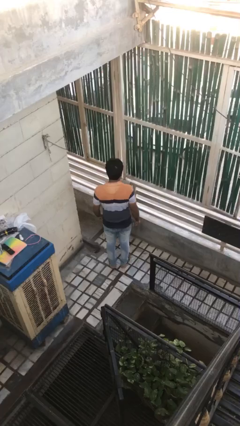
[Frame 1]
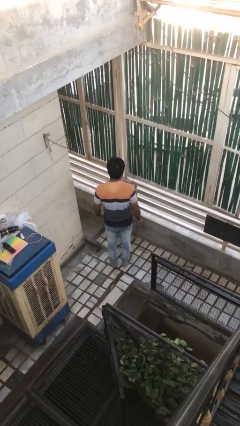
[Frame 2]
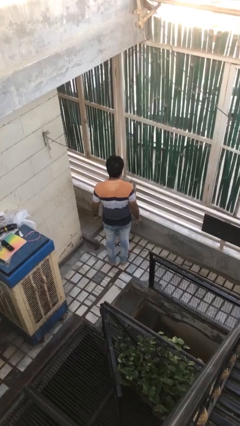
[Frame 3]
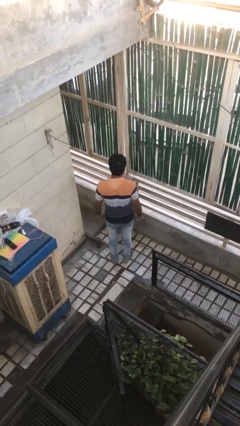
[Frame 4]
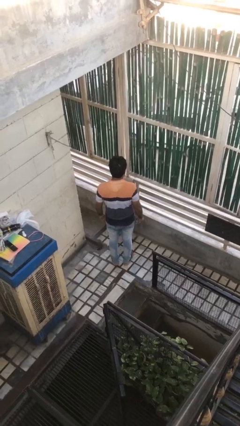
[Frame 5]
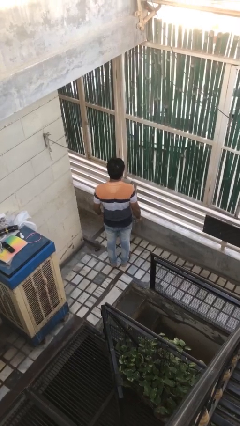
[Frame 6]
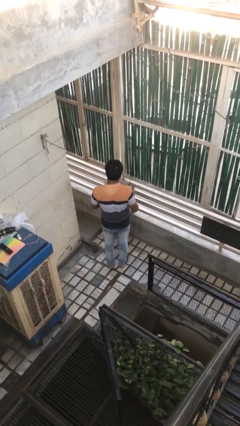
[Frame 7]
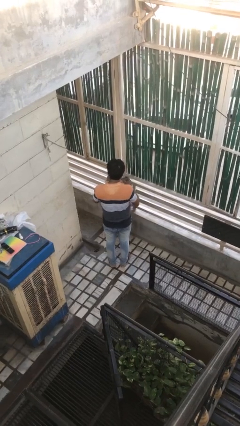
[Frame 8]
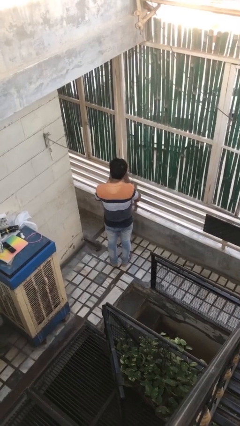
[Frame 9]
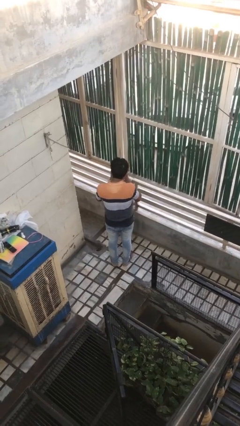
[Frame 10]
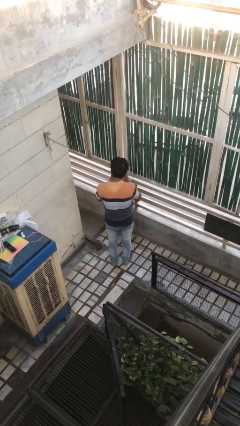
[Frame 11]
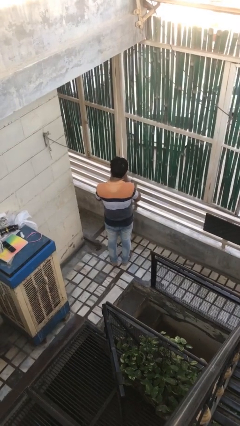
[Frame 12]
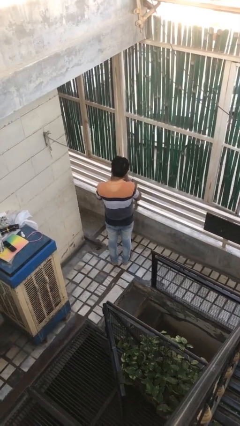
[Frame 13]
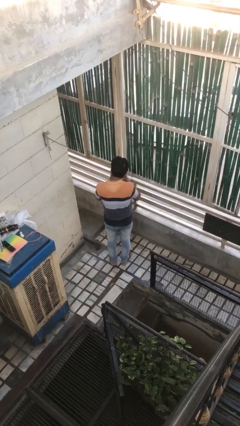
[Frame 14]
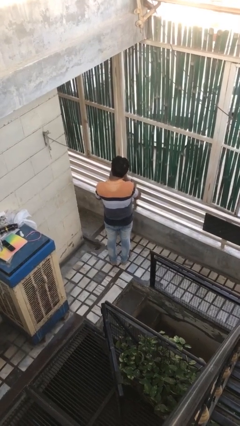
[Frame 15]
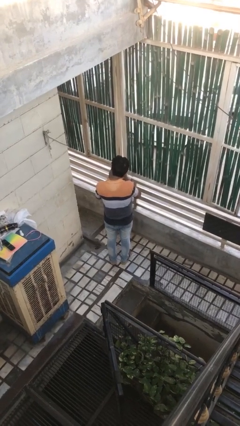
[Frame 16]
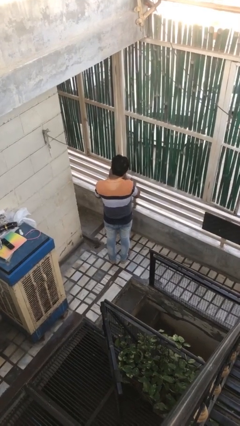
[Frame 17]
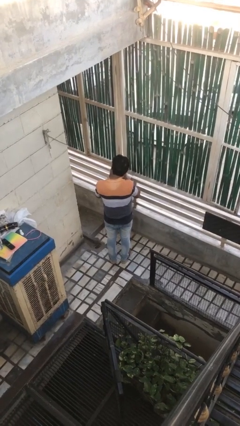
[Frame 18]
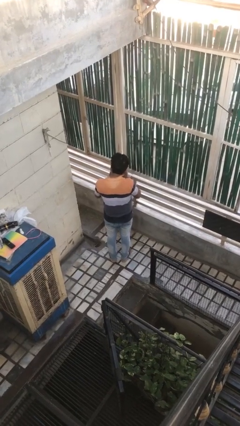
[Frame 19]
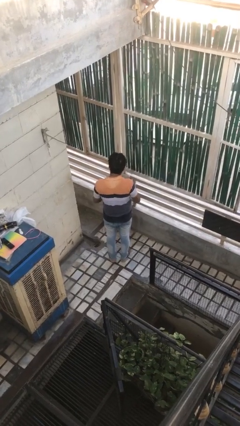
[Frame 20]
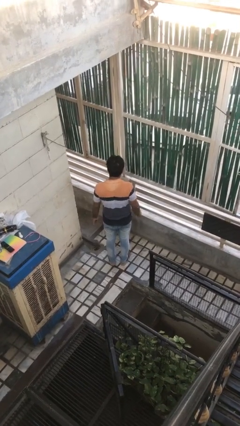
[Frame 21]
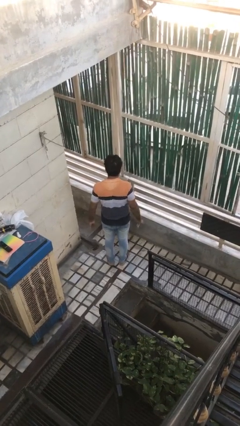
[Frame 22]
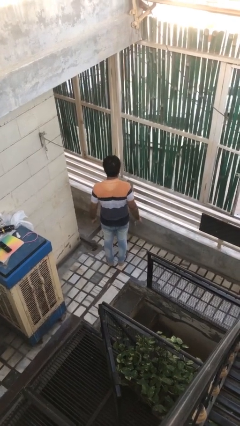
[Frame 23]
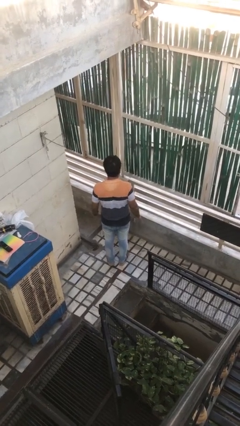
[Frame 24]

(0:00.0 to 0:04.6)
person clips fingernails

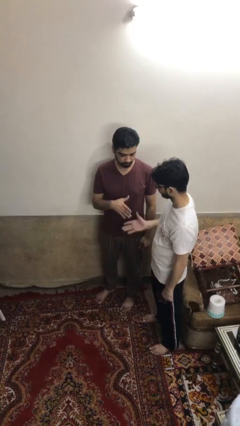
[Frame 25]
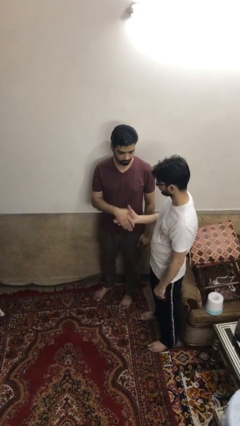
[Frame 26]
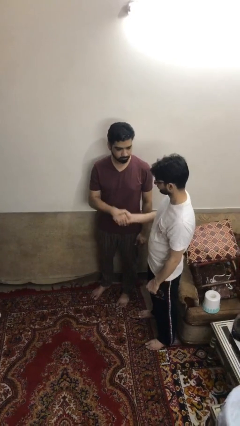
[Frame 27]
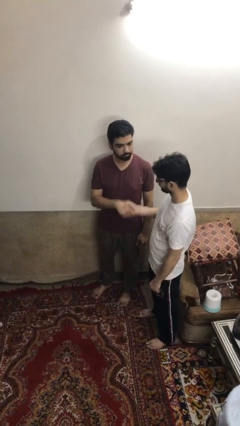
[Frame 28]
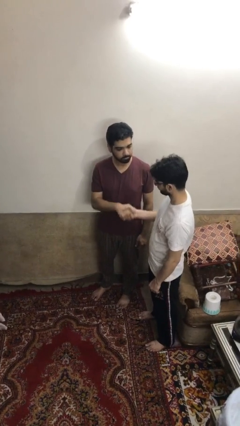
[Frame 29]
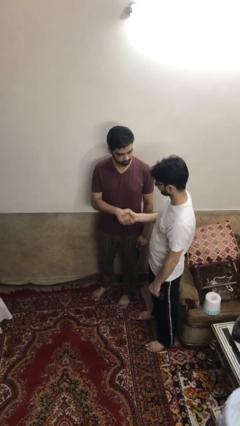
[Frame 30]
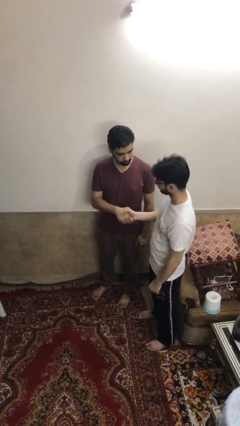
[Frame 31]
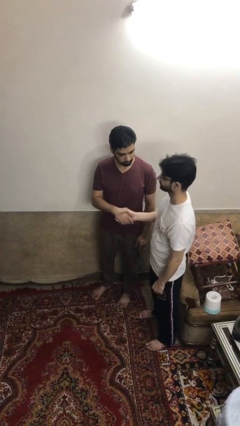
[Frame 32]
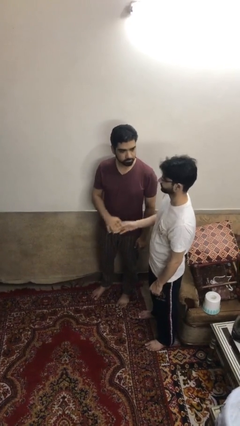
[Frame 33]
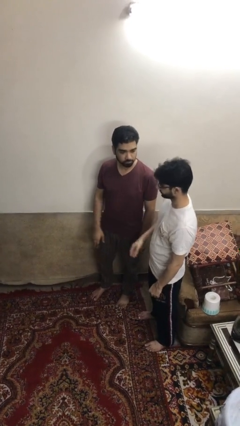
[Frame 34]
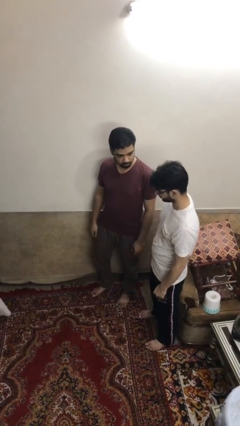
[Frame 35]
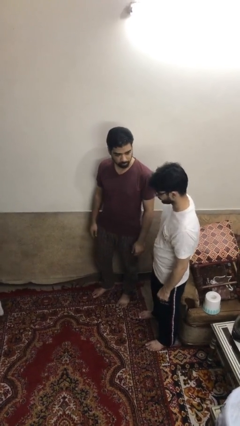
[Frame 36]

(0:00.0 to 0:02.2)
person shakes hand

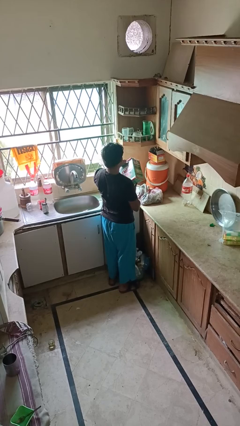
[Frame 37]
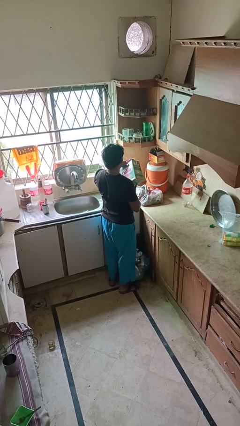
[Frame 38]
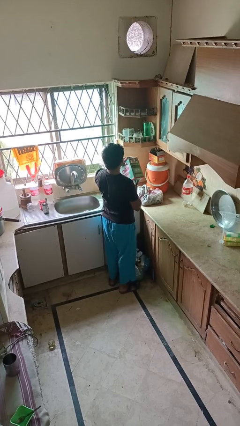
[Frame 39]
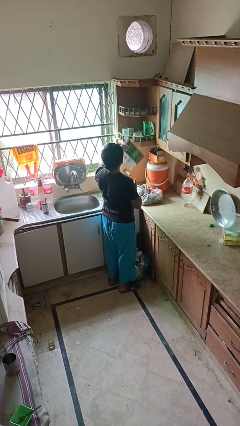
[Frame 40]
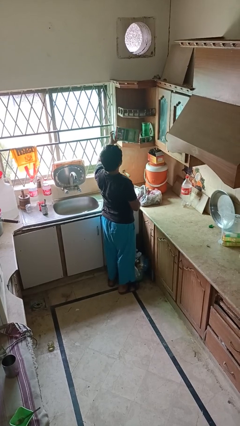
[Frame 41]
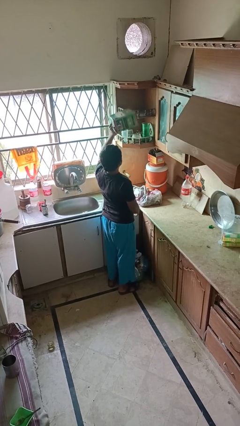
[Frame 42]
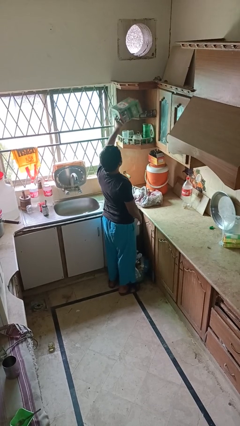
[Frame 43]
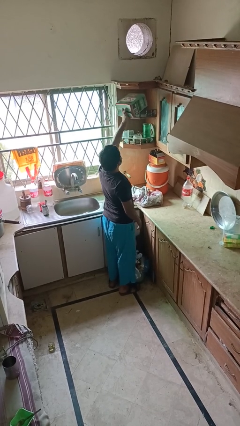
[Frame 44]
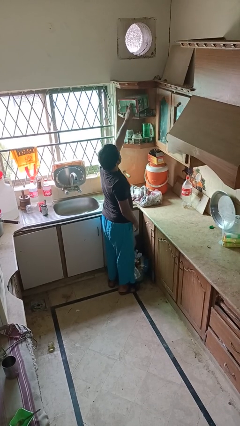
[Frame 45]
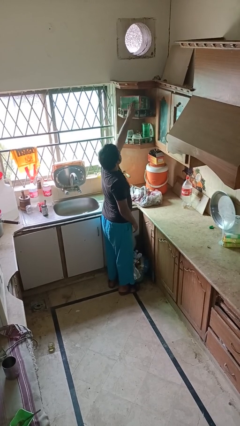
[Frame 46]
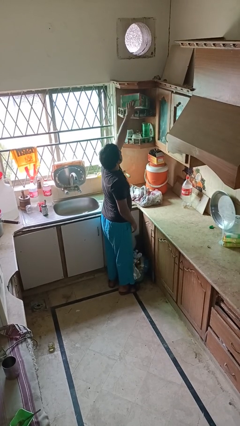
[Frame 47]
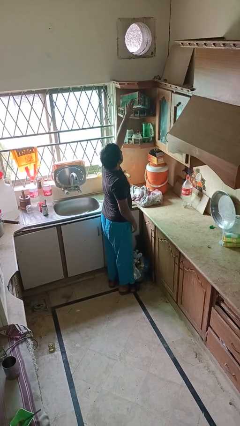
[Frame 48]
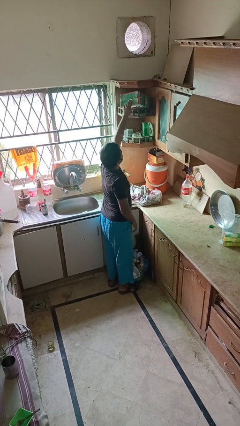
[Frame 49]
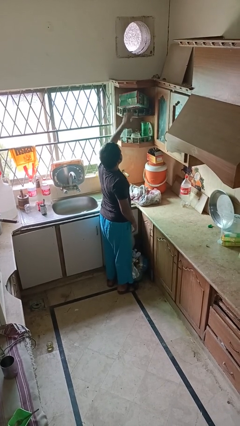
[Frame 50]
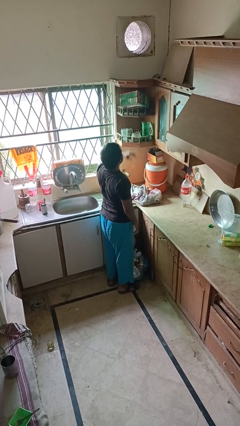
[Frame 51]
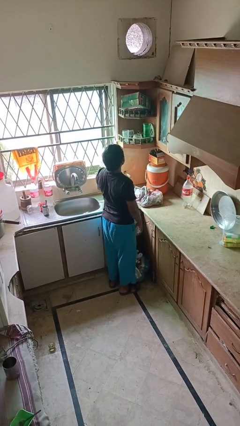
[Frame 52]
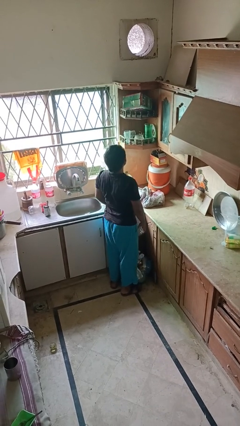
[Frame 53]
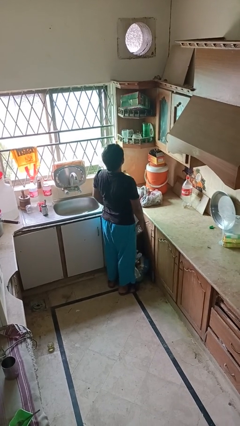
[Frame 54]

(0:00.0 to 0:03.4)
person puts down object on shelf

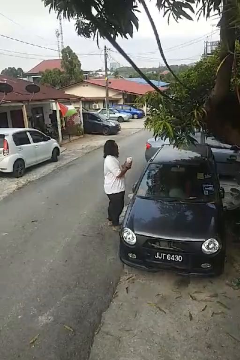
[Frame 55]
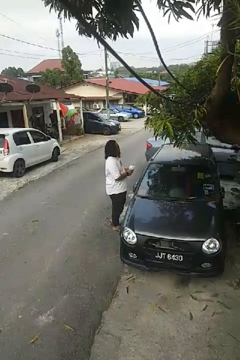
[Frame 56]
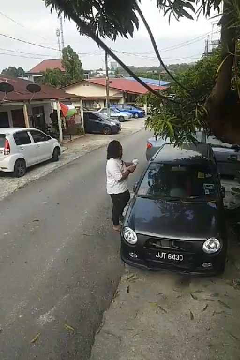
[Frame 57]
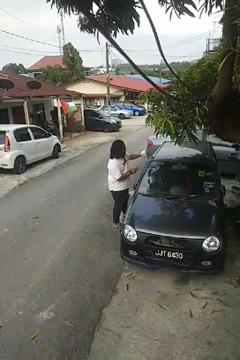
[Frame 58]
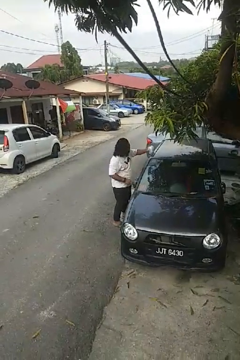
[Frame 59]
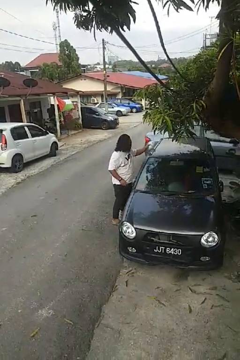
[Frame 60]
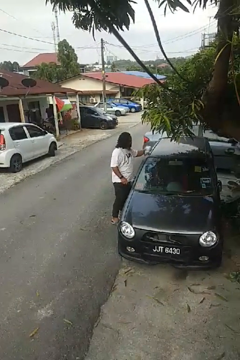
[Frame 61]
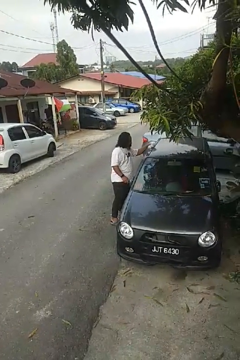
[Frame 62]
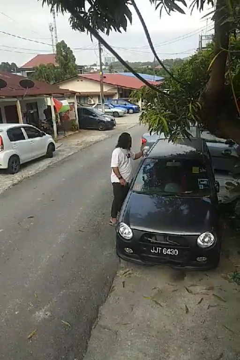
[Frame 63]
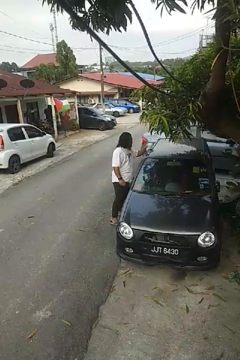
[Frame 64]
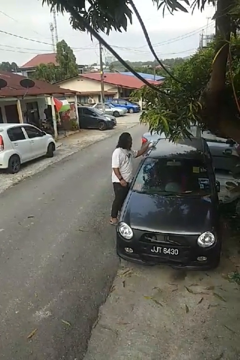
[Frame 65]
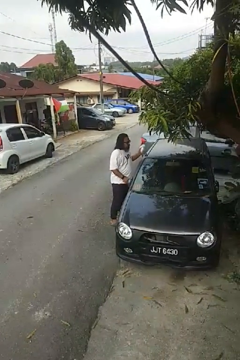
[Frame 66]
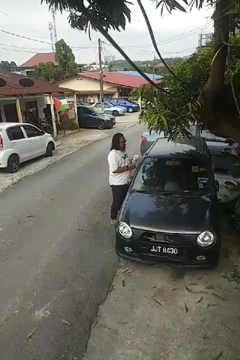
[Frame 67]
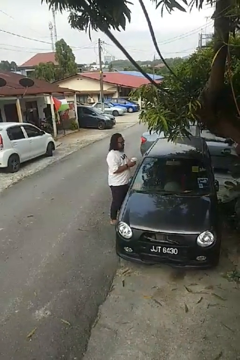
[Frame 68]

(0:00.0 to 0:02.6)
person polishes car with rag

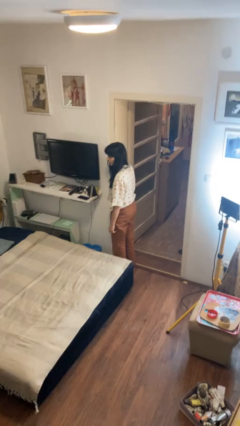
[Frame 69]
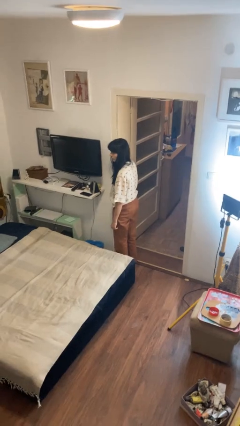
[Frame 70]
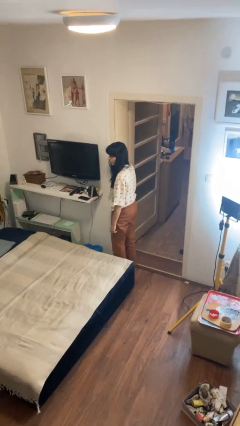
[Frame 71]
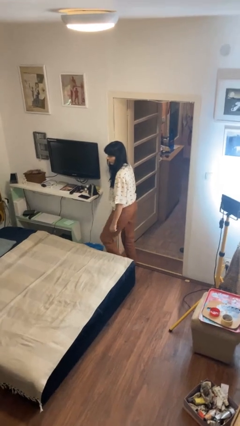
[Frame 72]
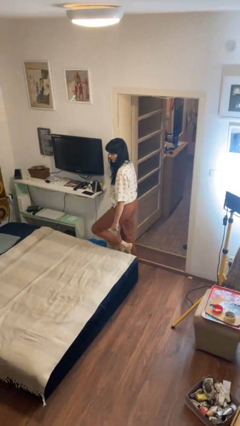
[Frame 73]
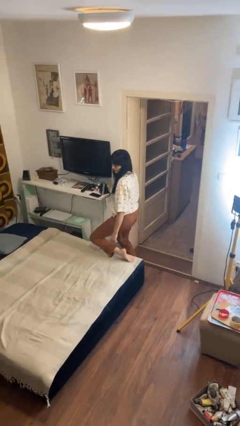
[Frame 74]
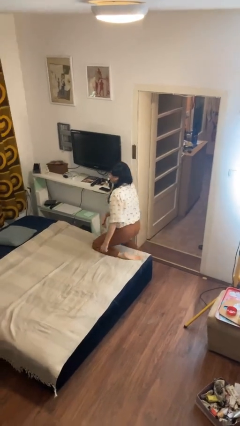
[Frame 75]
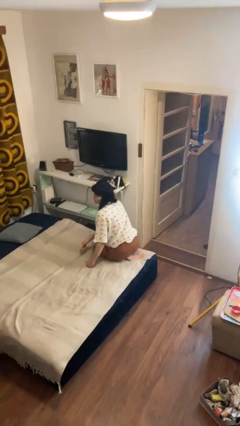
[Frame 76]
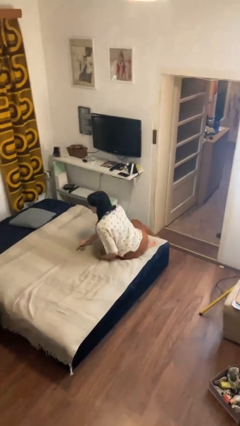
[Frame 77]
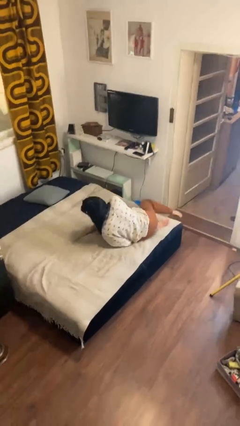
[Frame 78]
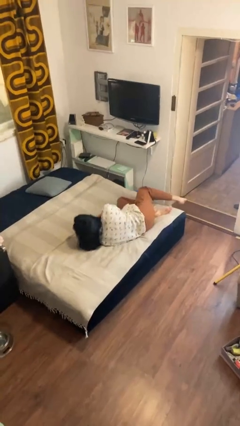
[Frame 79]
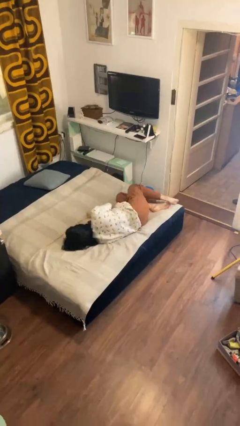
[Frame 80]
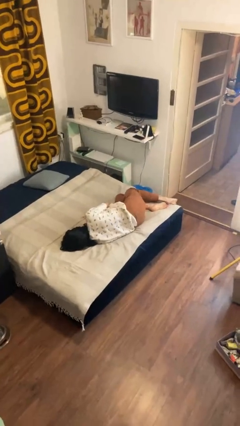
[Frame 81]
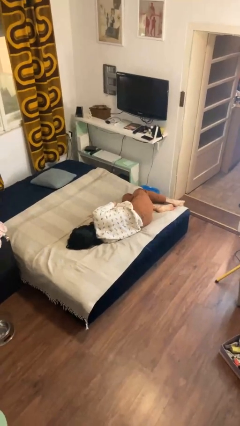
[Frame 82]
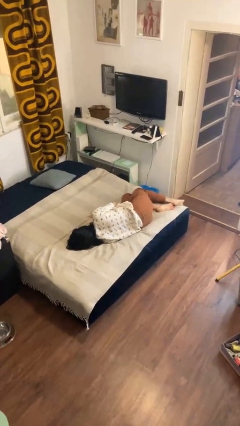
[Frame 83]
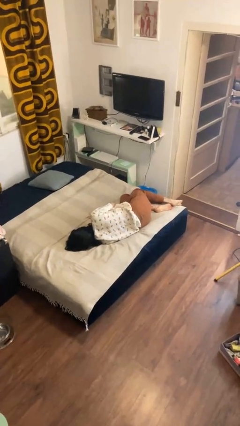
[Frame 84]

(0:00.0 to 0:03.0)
person lies down on bed

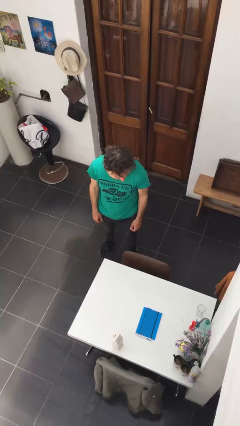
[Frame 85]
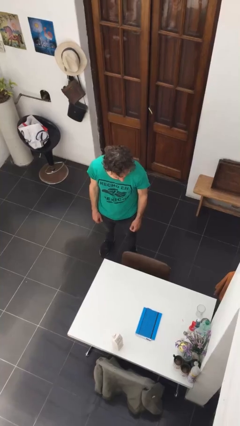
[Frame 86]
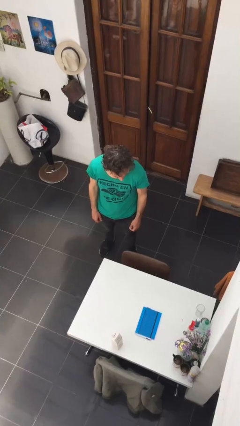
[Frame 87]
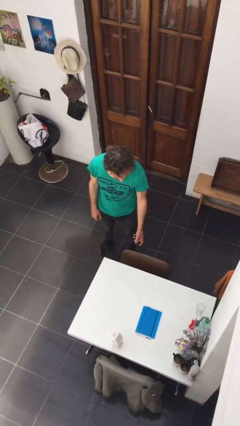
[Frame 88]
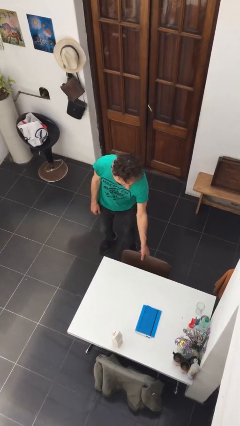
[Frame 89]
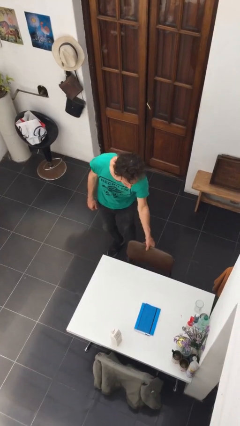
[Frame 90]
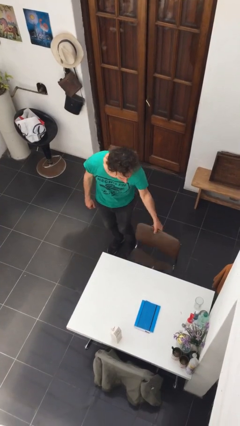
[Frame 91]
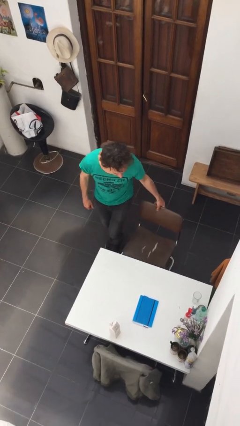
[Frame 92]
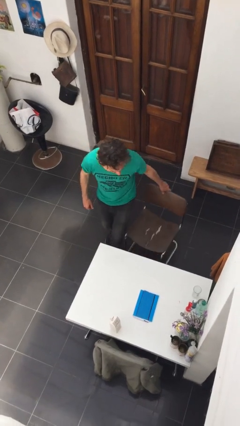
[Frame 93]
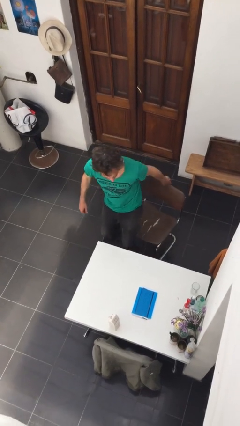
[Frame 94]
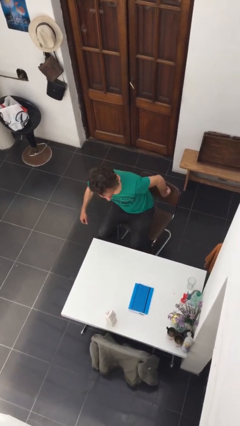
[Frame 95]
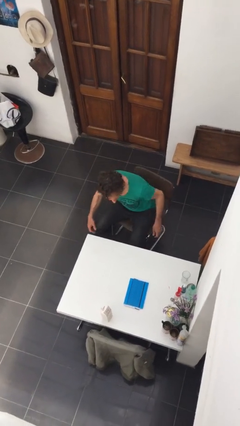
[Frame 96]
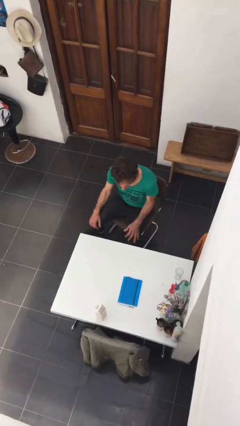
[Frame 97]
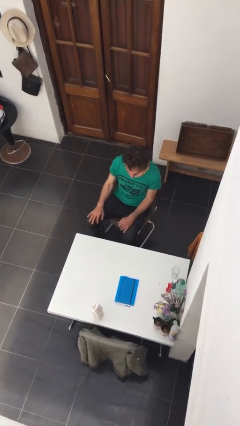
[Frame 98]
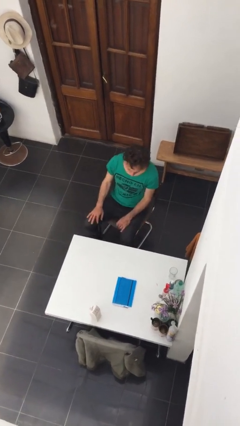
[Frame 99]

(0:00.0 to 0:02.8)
person sits down
